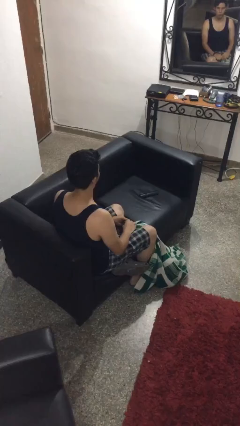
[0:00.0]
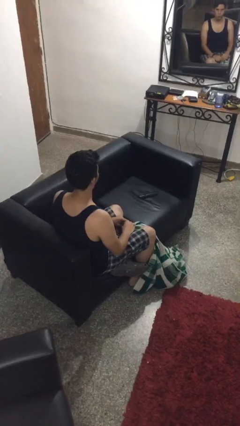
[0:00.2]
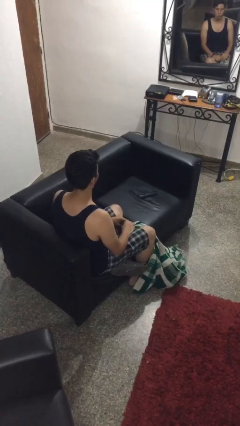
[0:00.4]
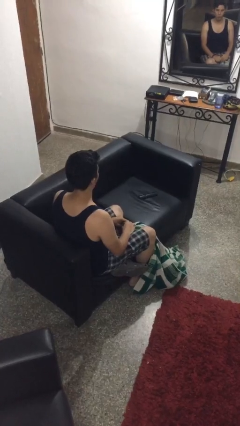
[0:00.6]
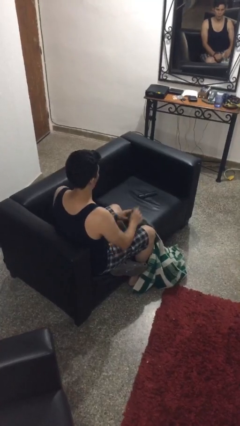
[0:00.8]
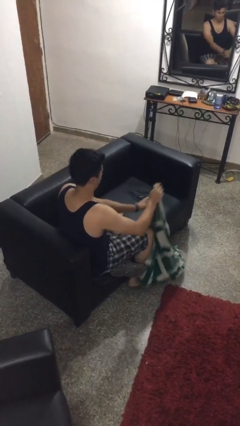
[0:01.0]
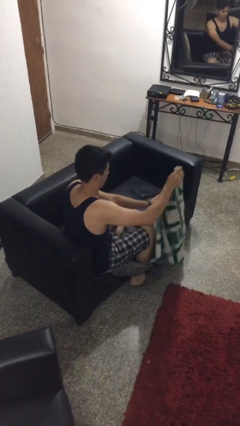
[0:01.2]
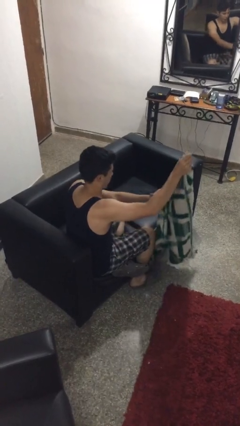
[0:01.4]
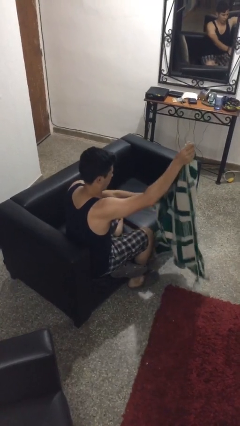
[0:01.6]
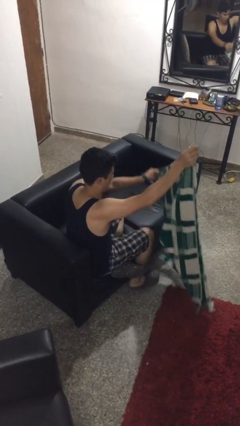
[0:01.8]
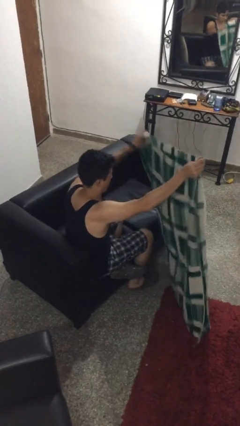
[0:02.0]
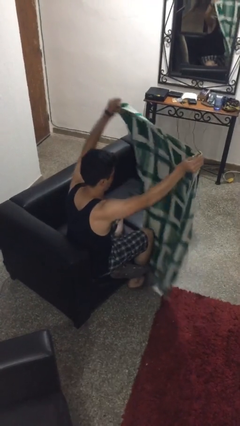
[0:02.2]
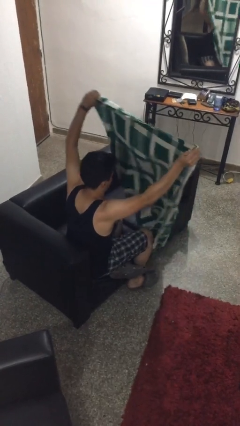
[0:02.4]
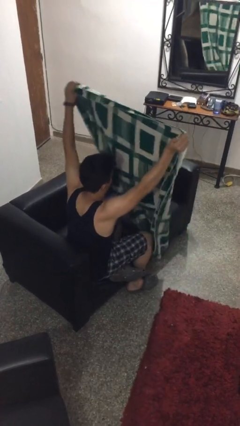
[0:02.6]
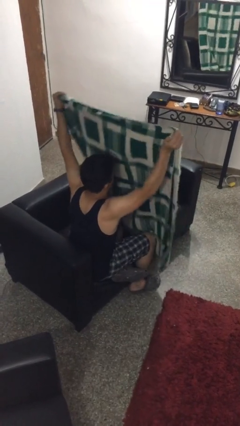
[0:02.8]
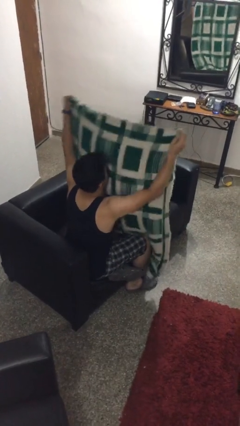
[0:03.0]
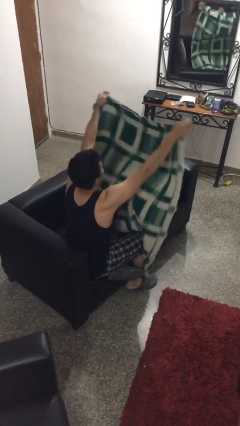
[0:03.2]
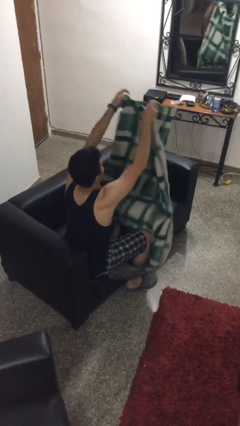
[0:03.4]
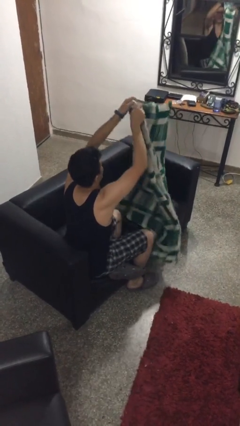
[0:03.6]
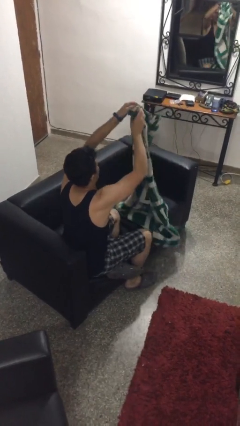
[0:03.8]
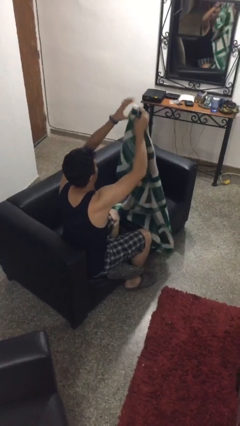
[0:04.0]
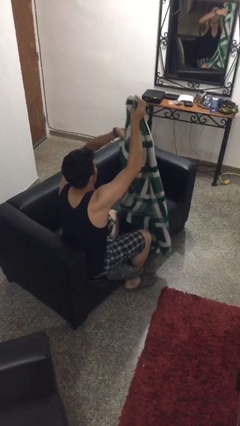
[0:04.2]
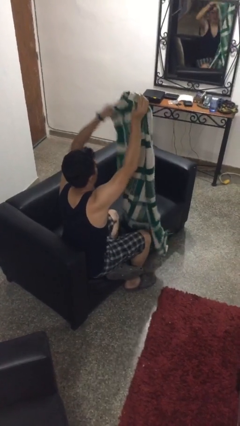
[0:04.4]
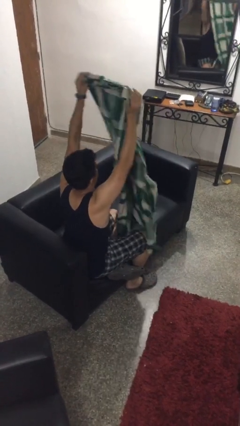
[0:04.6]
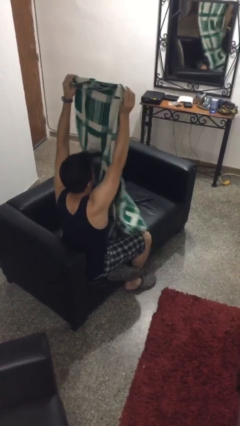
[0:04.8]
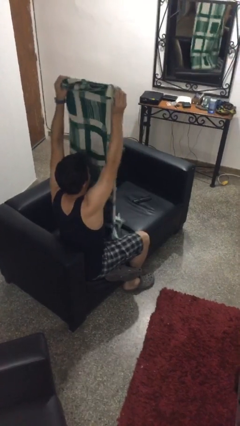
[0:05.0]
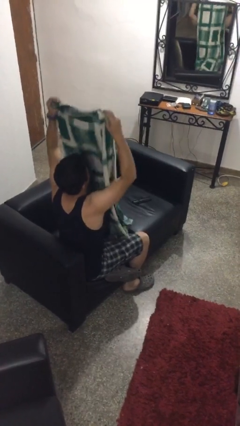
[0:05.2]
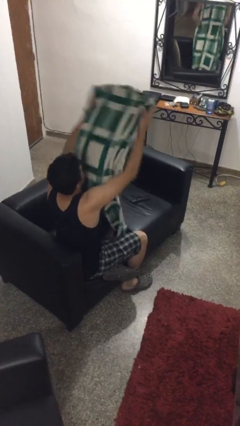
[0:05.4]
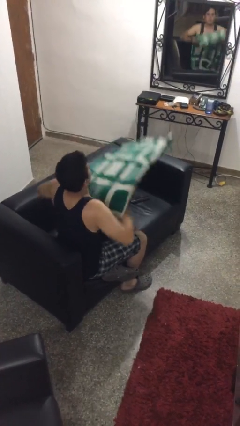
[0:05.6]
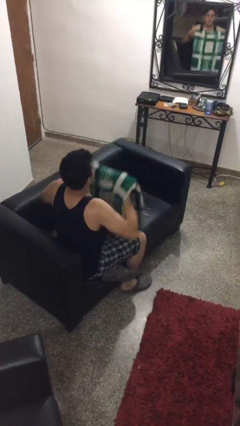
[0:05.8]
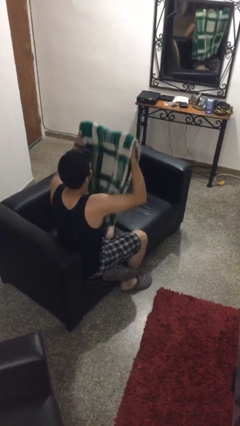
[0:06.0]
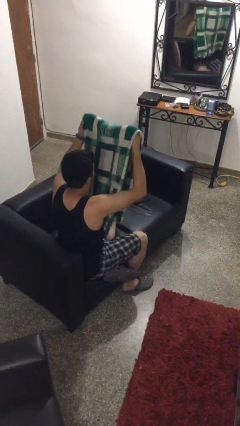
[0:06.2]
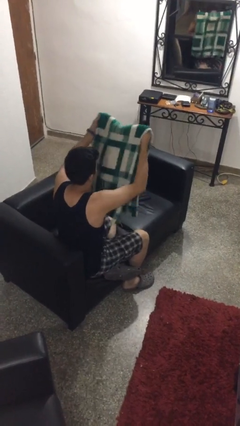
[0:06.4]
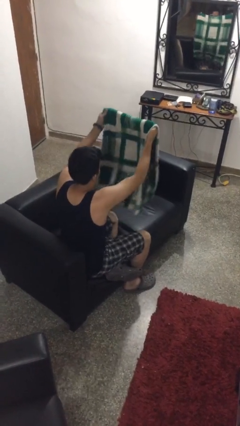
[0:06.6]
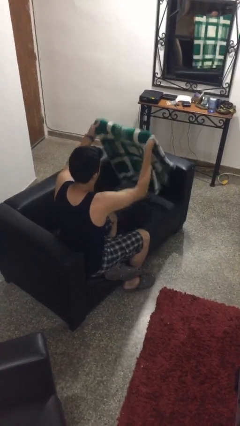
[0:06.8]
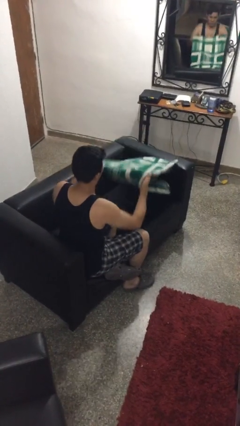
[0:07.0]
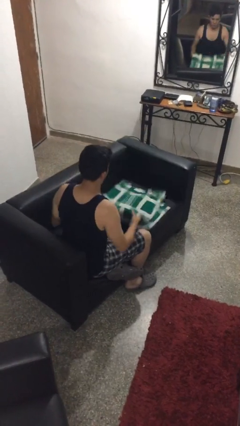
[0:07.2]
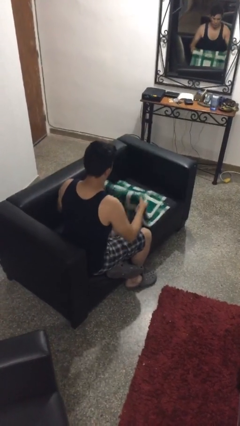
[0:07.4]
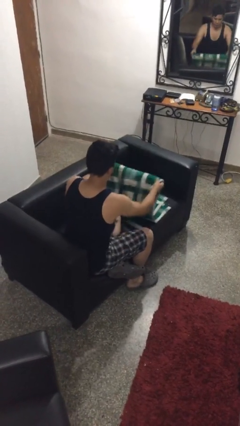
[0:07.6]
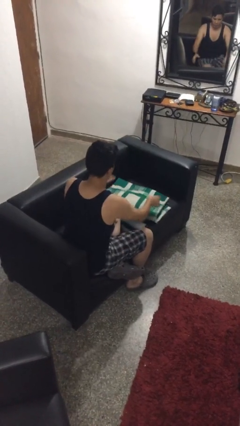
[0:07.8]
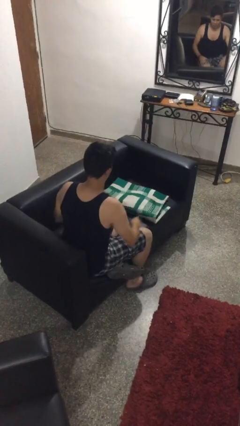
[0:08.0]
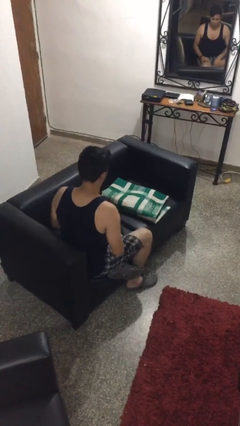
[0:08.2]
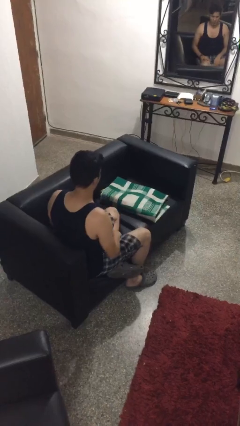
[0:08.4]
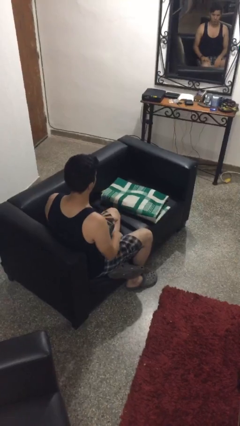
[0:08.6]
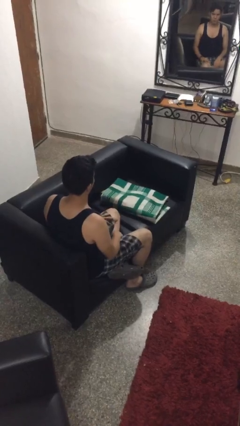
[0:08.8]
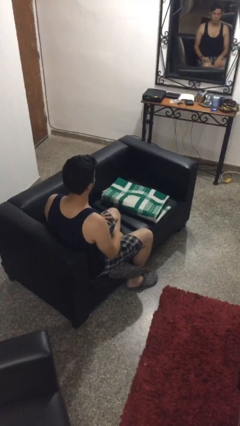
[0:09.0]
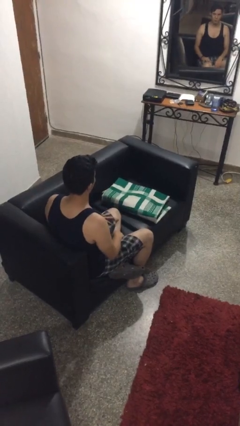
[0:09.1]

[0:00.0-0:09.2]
person folds blanket

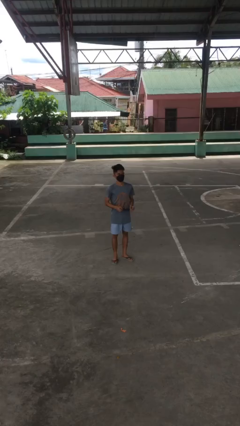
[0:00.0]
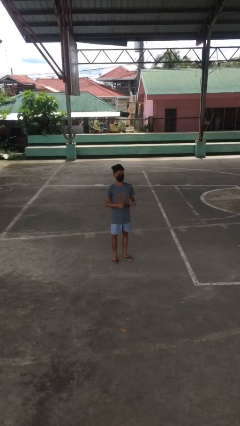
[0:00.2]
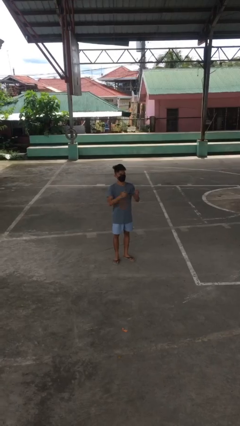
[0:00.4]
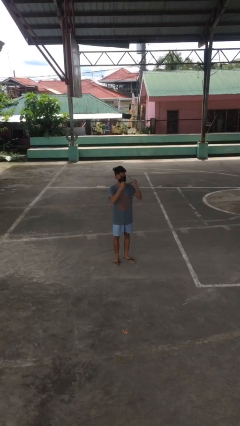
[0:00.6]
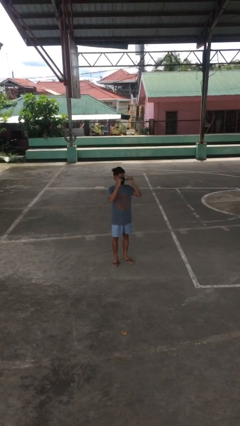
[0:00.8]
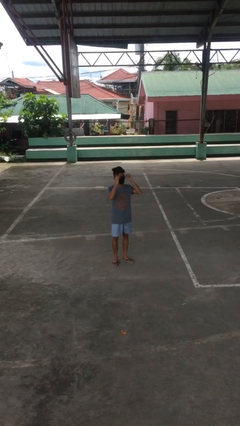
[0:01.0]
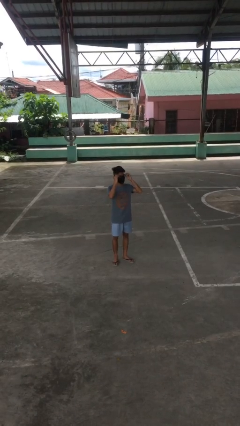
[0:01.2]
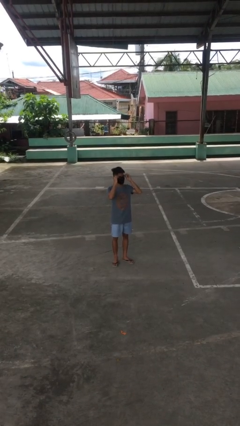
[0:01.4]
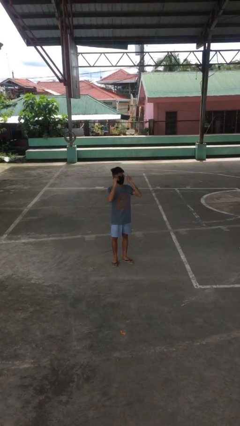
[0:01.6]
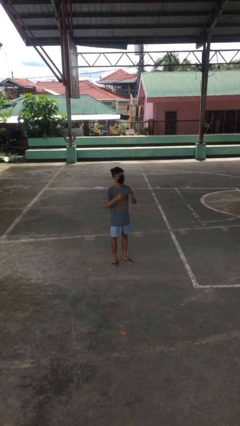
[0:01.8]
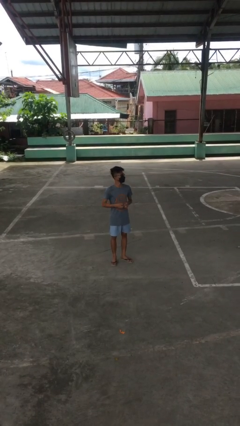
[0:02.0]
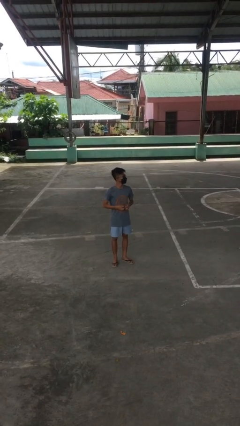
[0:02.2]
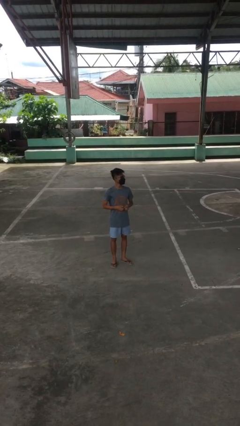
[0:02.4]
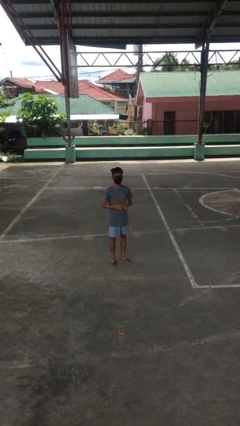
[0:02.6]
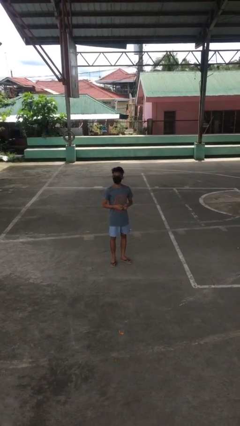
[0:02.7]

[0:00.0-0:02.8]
person puts on glasses

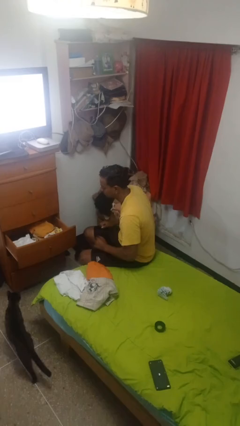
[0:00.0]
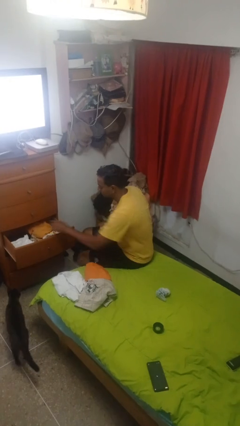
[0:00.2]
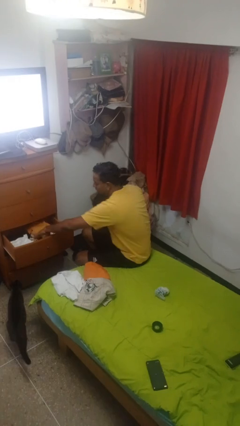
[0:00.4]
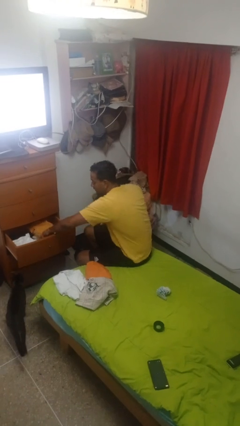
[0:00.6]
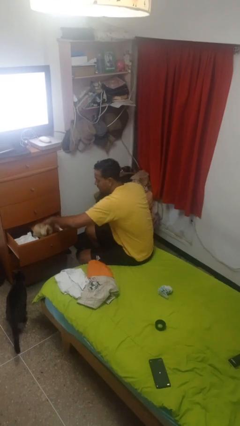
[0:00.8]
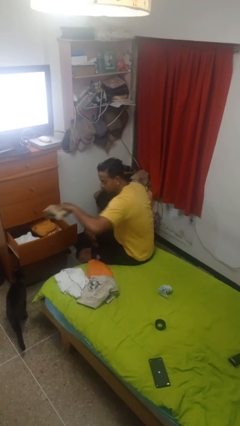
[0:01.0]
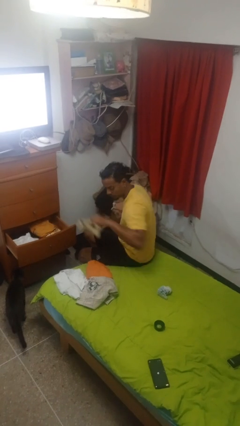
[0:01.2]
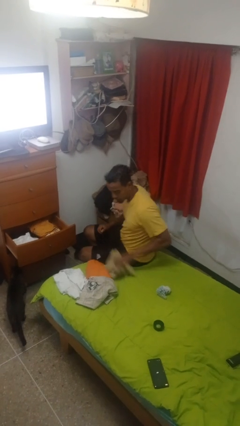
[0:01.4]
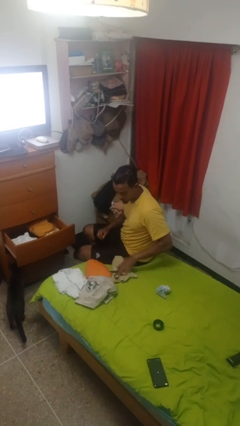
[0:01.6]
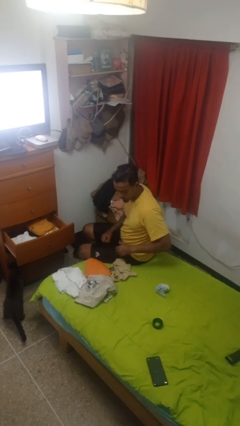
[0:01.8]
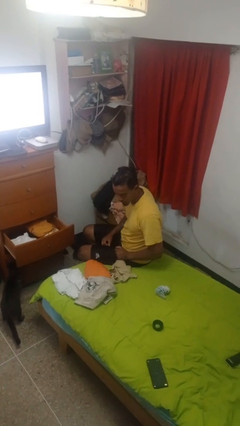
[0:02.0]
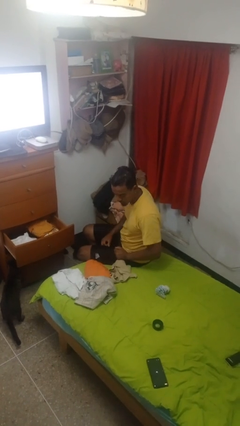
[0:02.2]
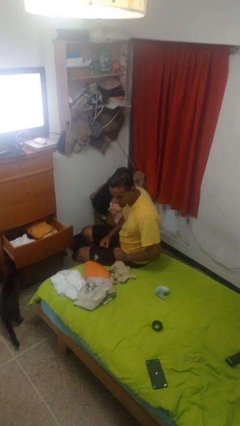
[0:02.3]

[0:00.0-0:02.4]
person takes clothes from dresser

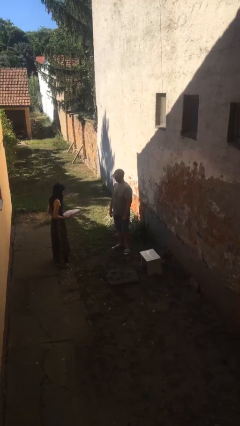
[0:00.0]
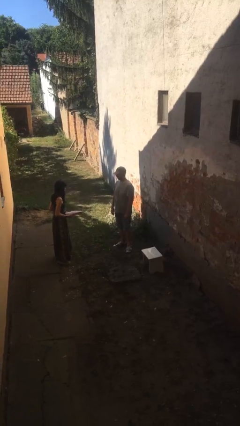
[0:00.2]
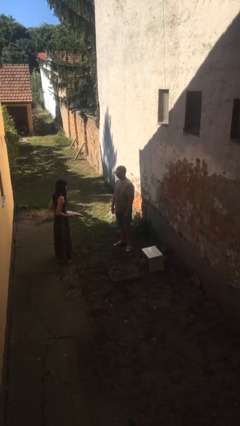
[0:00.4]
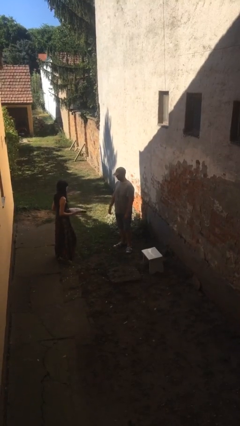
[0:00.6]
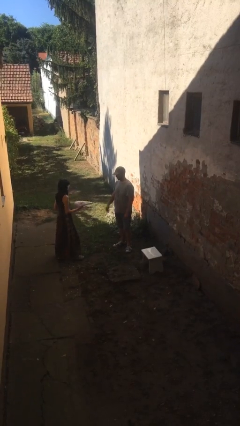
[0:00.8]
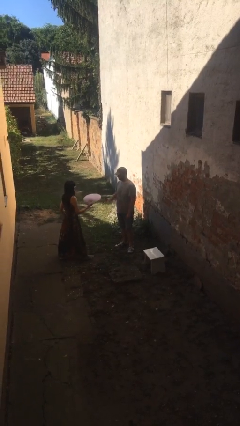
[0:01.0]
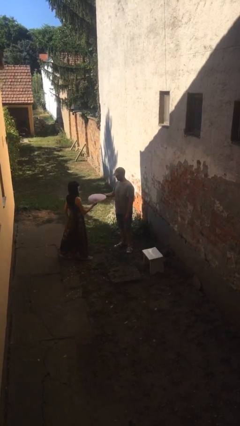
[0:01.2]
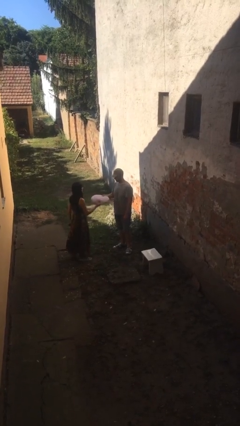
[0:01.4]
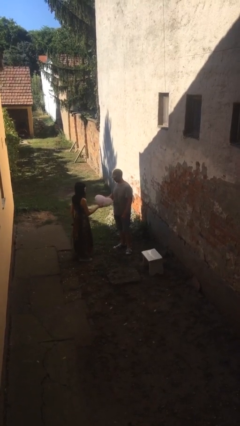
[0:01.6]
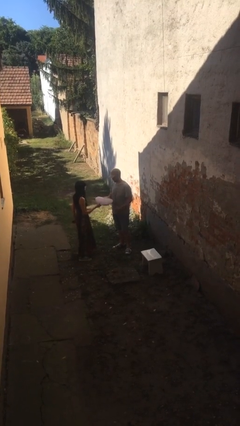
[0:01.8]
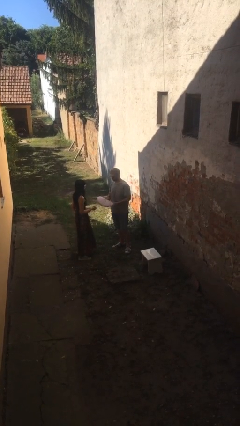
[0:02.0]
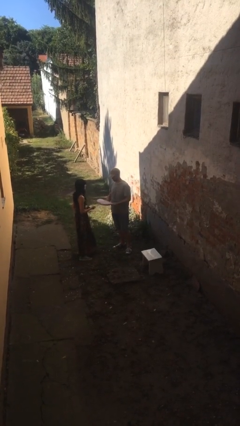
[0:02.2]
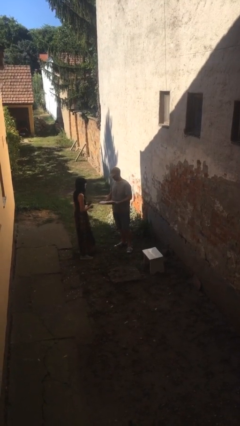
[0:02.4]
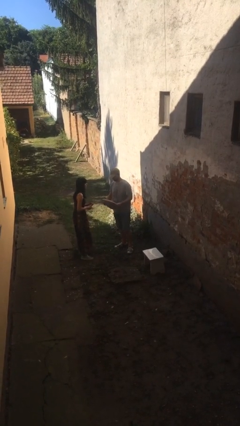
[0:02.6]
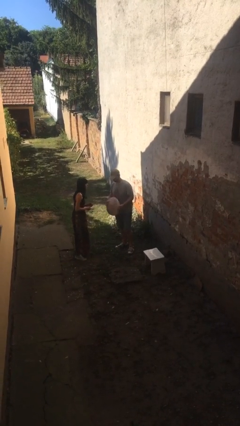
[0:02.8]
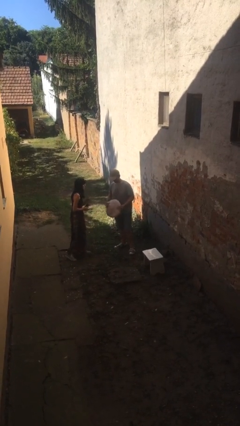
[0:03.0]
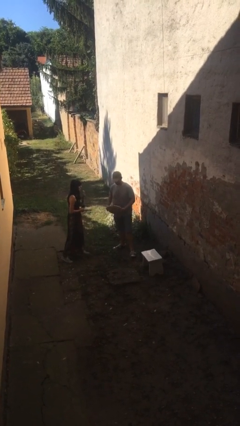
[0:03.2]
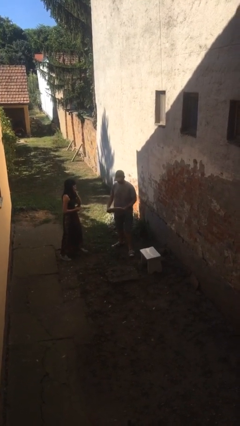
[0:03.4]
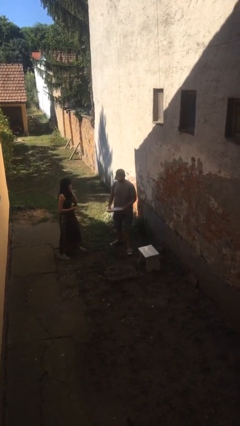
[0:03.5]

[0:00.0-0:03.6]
person transfers object to person
